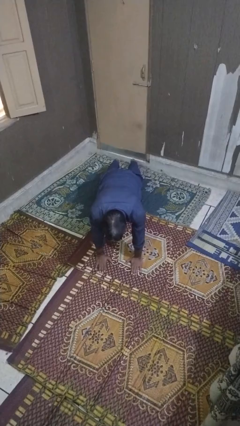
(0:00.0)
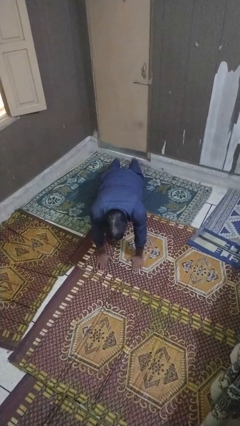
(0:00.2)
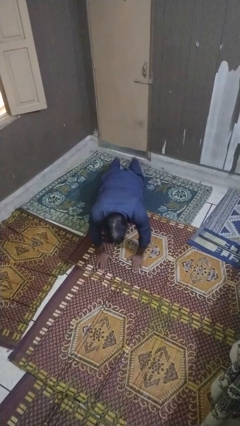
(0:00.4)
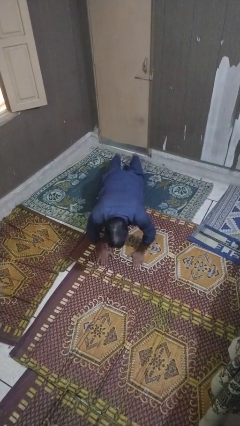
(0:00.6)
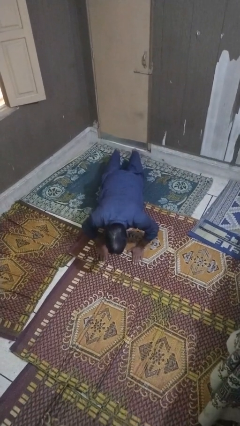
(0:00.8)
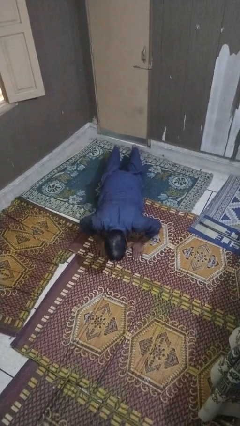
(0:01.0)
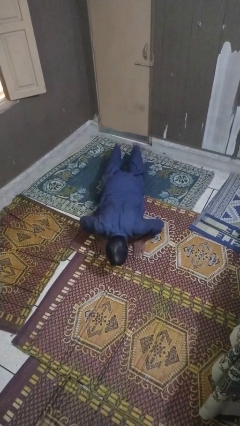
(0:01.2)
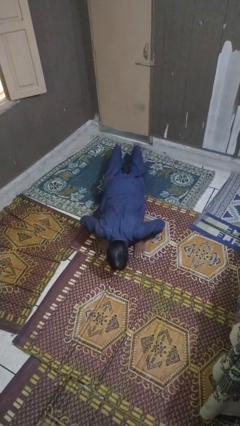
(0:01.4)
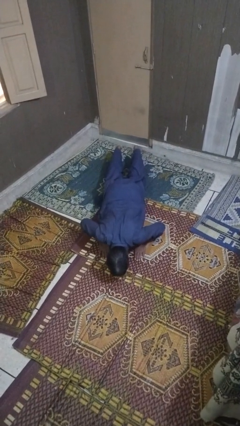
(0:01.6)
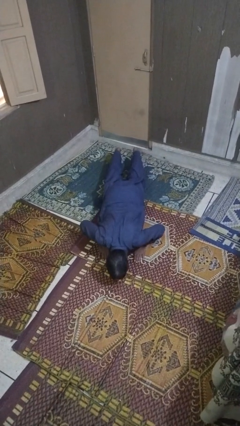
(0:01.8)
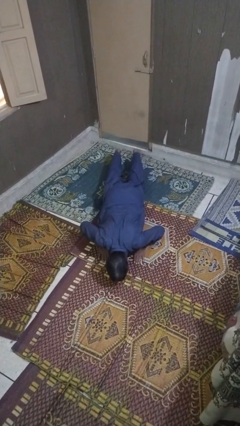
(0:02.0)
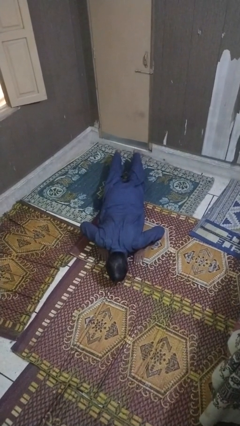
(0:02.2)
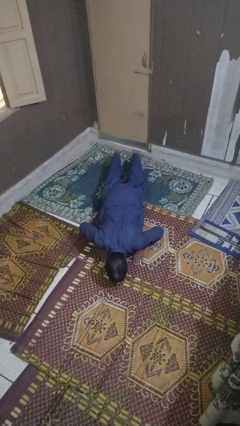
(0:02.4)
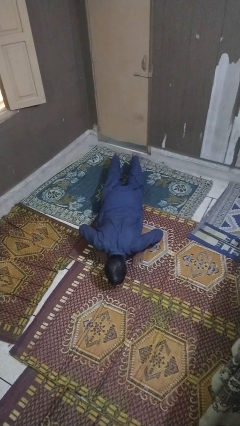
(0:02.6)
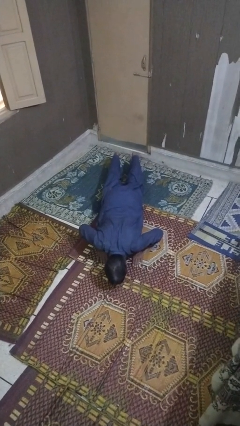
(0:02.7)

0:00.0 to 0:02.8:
person exercises with pushup

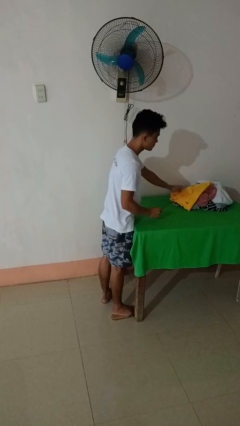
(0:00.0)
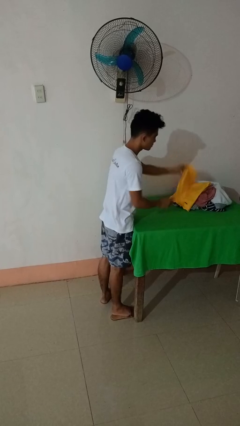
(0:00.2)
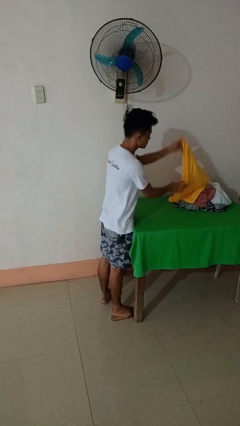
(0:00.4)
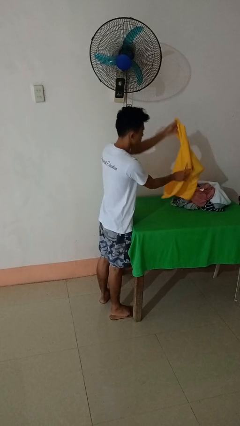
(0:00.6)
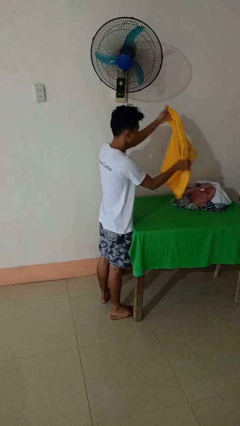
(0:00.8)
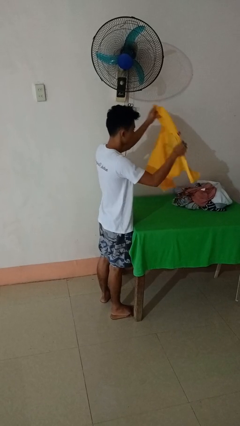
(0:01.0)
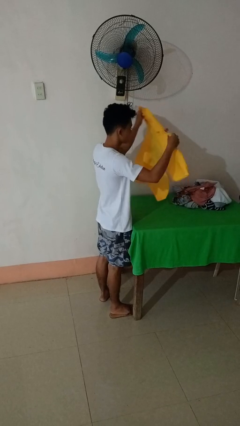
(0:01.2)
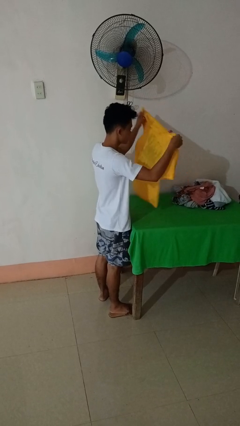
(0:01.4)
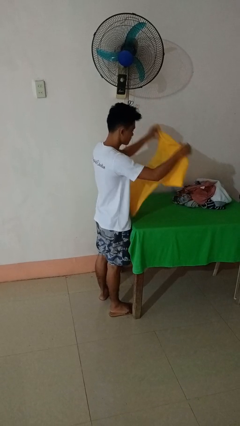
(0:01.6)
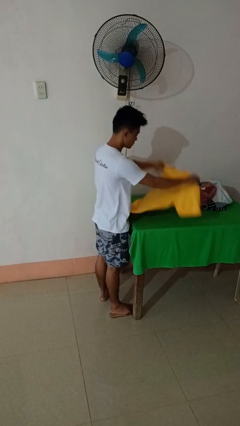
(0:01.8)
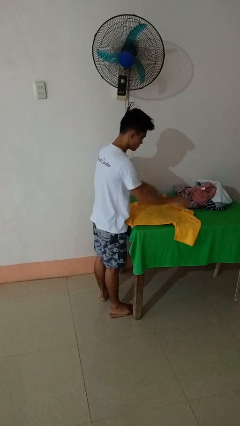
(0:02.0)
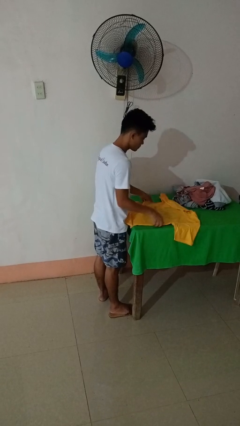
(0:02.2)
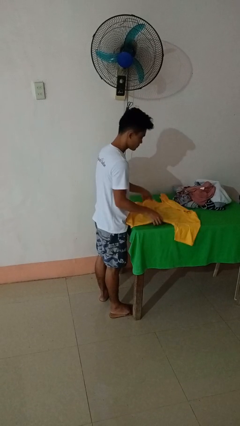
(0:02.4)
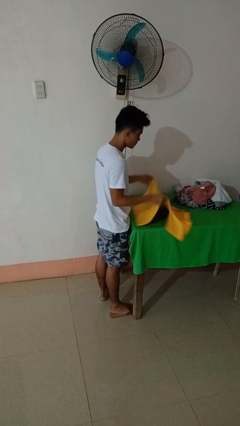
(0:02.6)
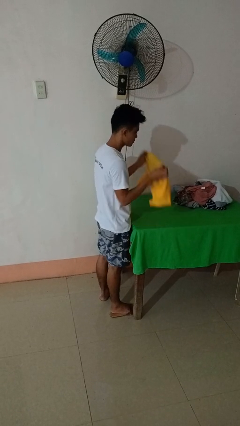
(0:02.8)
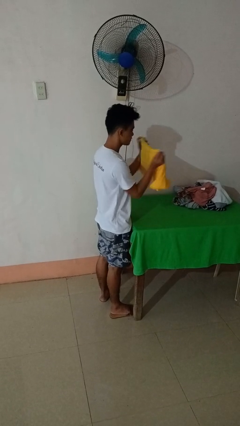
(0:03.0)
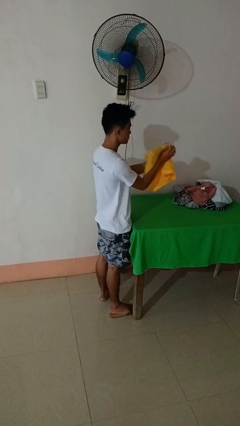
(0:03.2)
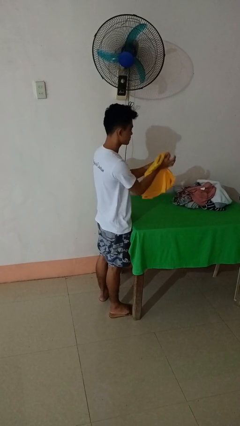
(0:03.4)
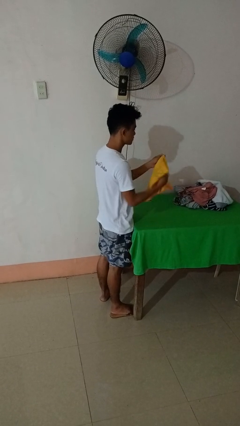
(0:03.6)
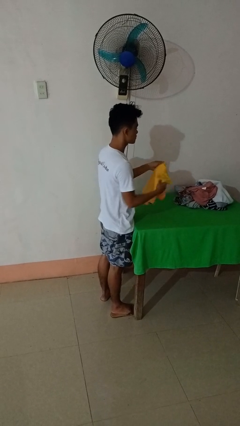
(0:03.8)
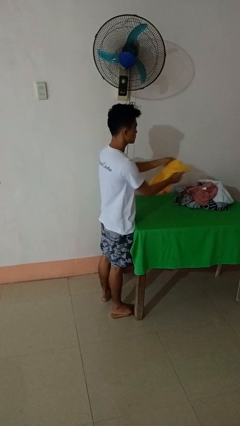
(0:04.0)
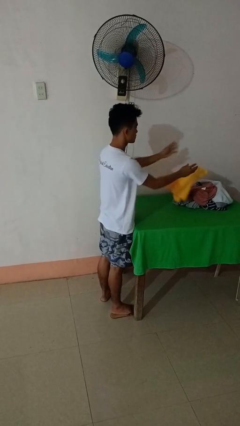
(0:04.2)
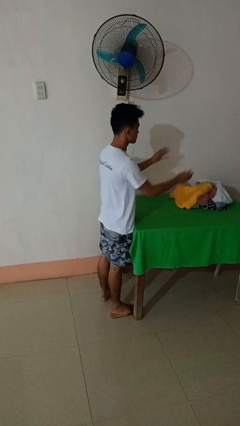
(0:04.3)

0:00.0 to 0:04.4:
person folds shirt

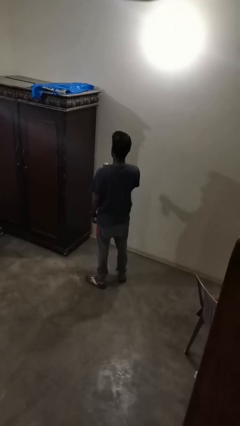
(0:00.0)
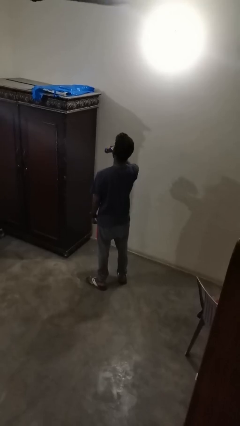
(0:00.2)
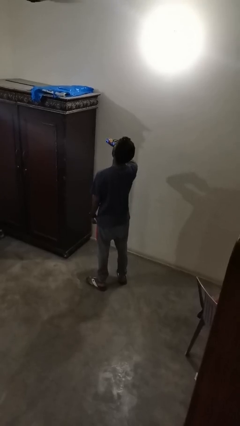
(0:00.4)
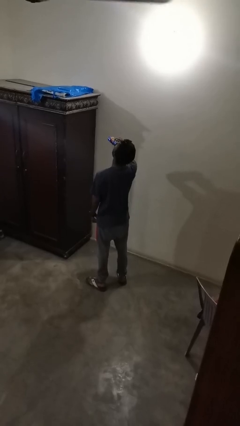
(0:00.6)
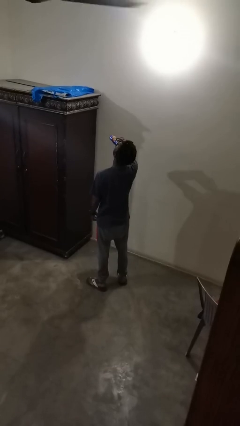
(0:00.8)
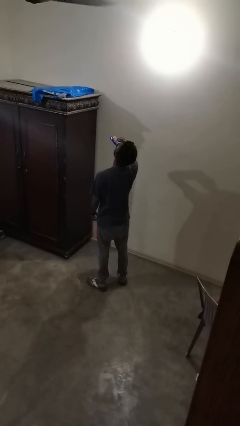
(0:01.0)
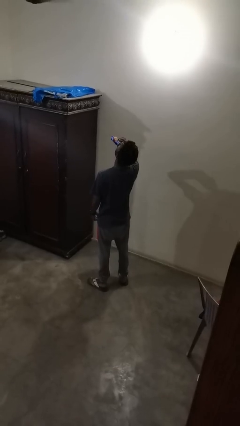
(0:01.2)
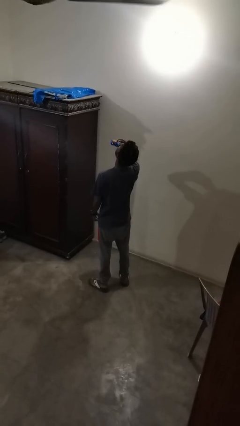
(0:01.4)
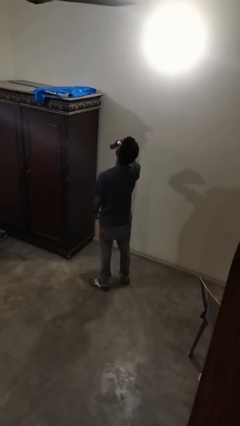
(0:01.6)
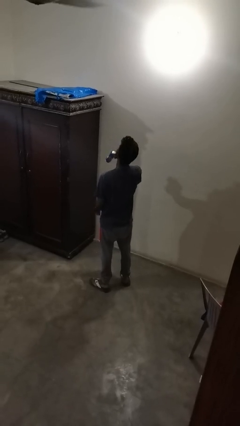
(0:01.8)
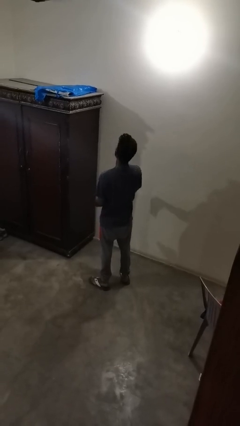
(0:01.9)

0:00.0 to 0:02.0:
person drinks from beverage can

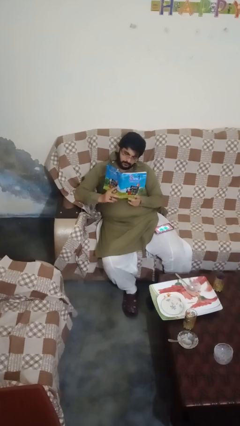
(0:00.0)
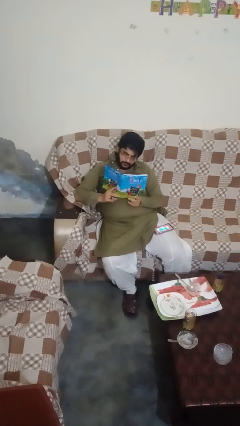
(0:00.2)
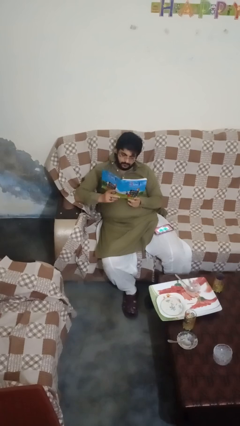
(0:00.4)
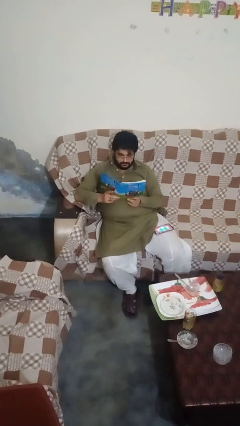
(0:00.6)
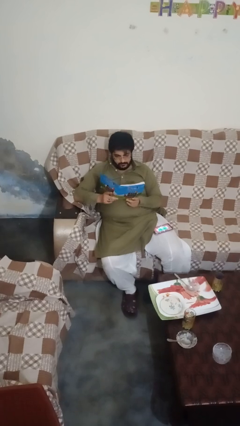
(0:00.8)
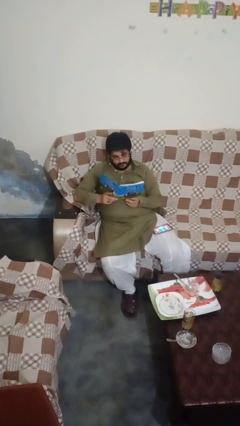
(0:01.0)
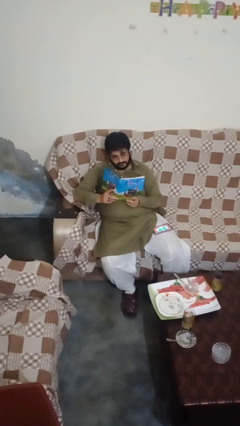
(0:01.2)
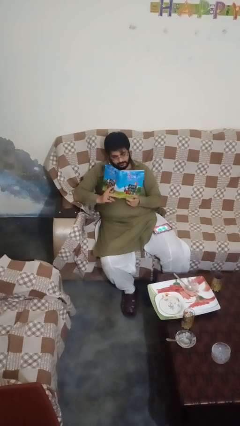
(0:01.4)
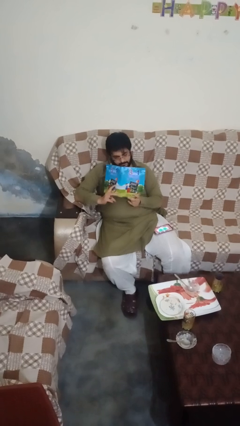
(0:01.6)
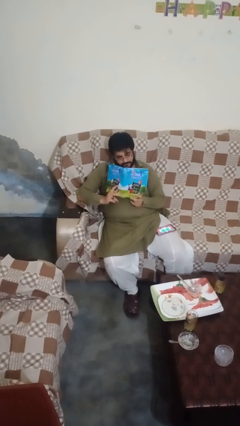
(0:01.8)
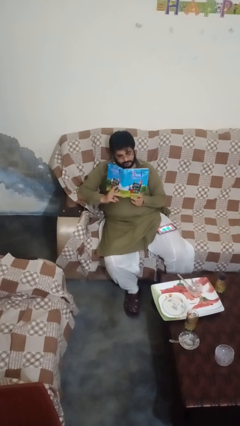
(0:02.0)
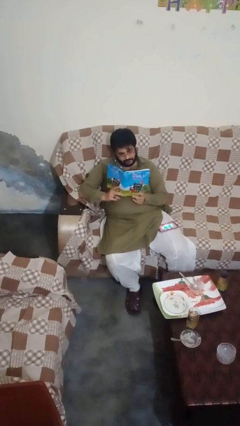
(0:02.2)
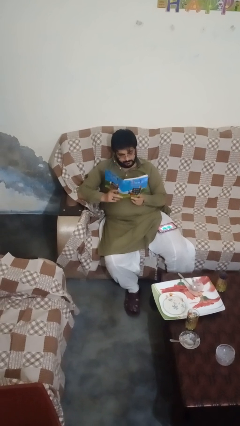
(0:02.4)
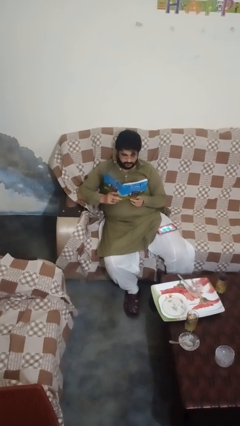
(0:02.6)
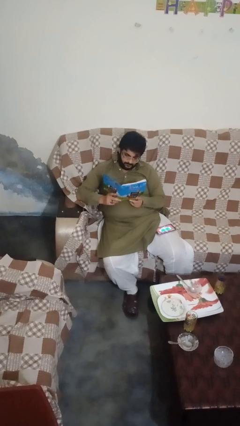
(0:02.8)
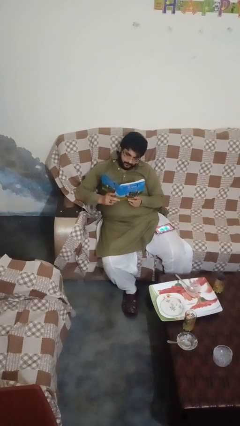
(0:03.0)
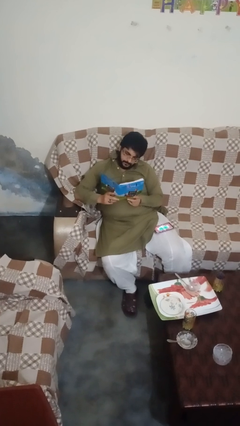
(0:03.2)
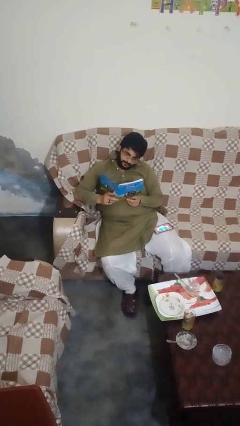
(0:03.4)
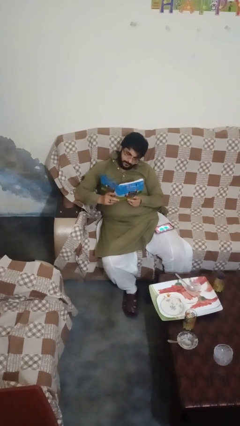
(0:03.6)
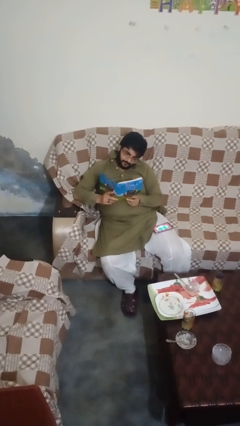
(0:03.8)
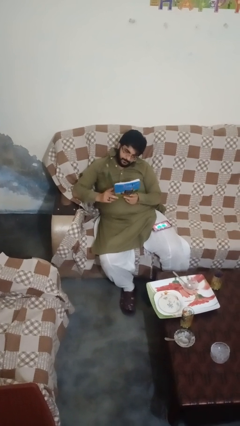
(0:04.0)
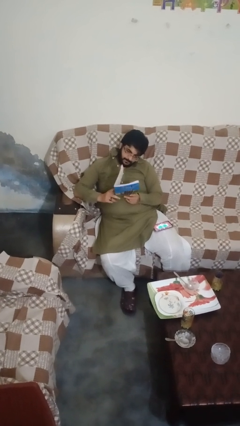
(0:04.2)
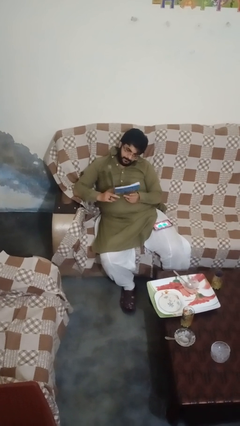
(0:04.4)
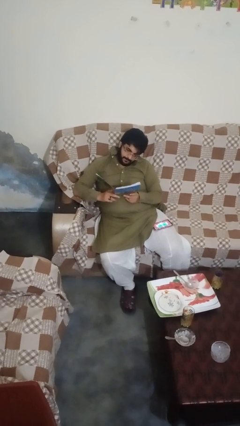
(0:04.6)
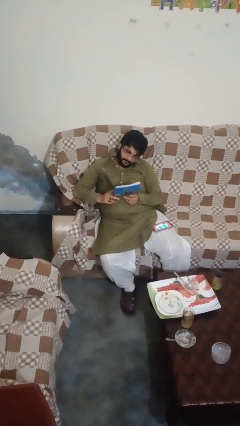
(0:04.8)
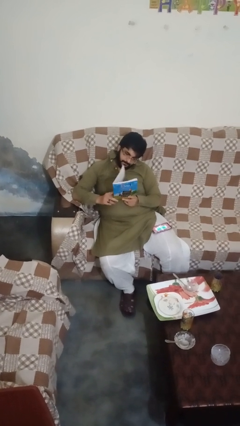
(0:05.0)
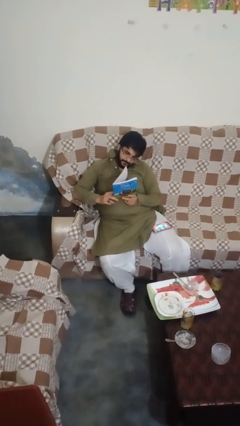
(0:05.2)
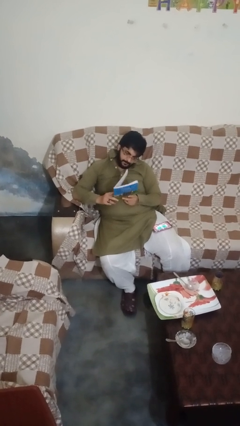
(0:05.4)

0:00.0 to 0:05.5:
person reads magazine

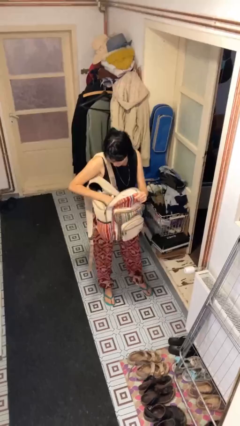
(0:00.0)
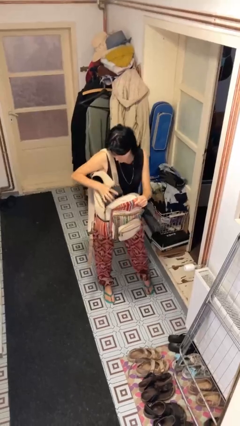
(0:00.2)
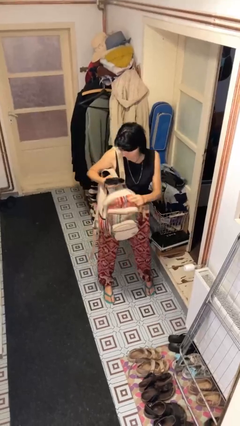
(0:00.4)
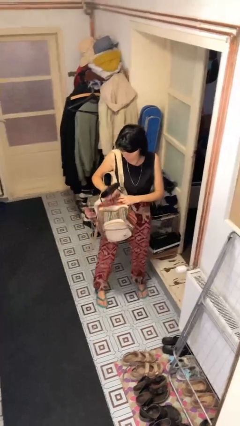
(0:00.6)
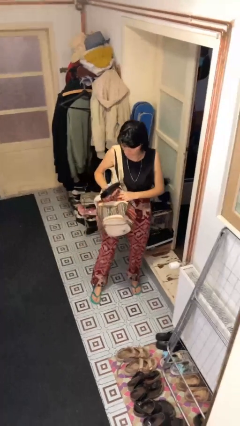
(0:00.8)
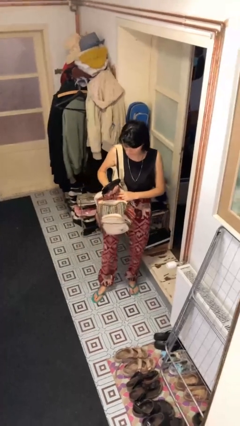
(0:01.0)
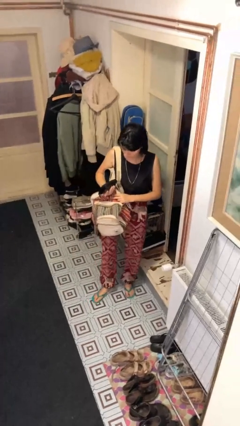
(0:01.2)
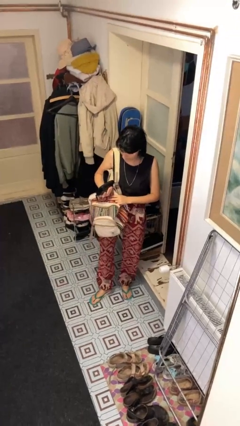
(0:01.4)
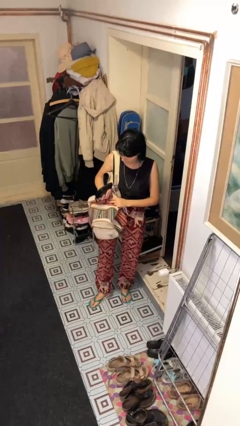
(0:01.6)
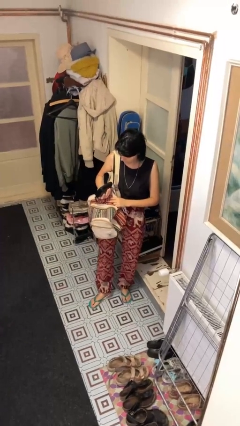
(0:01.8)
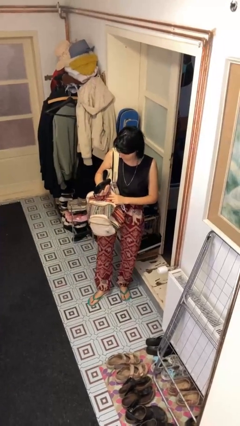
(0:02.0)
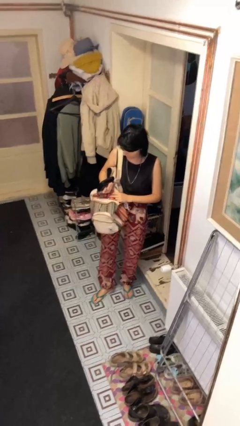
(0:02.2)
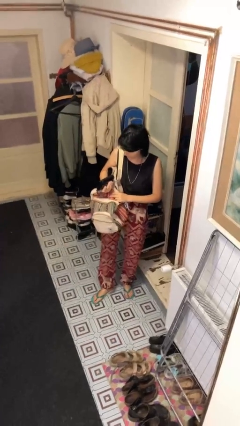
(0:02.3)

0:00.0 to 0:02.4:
person takes object from backpack

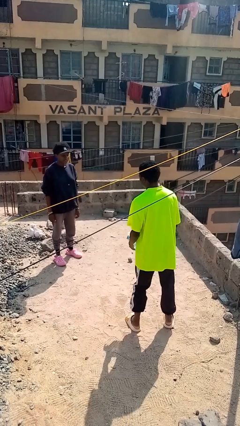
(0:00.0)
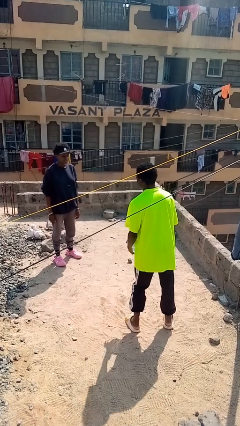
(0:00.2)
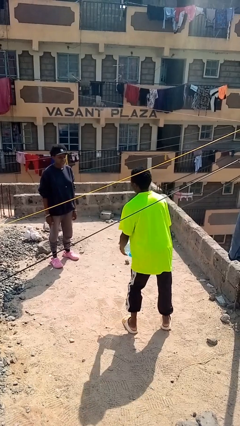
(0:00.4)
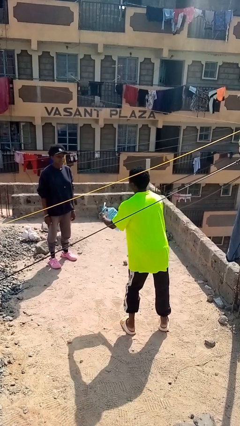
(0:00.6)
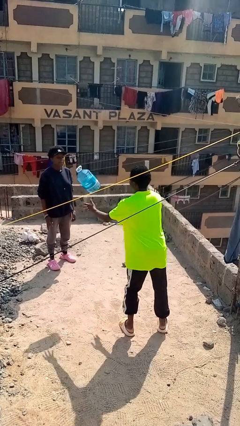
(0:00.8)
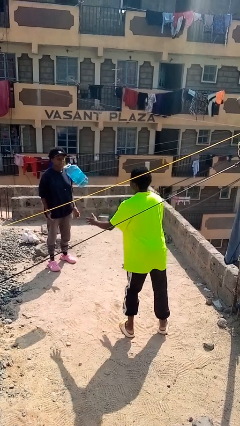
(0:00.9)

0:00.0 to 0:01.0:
person throws object to person
